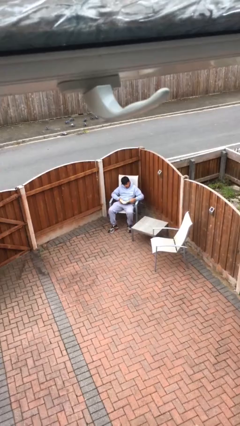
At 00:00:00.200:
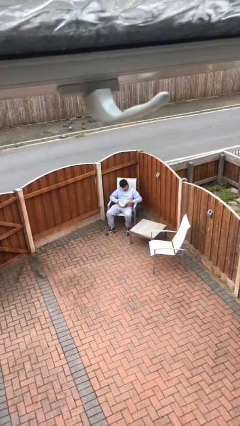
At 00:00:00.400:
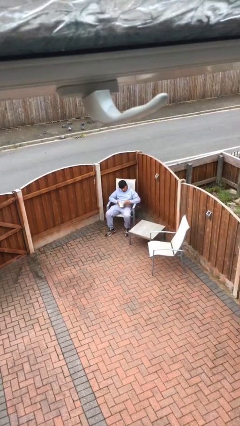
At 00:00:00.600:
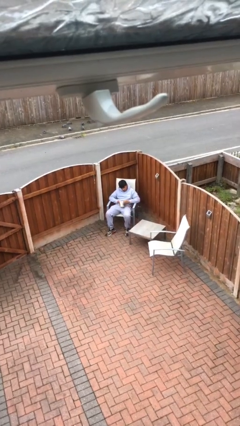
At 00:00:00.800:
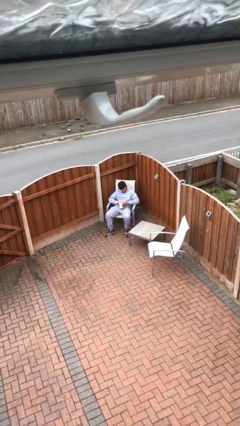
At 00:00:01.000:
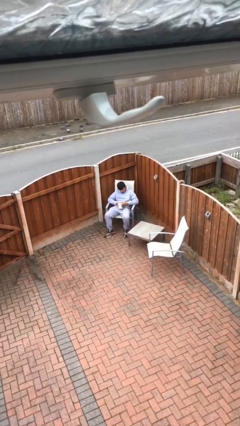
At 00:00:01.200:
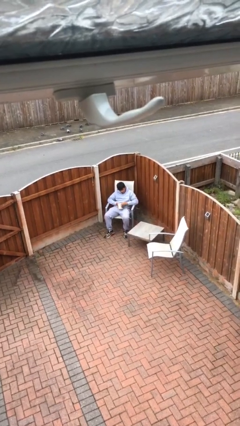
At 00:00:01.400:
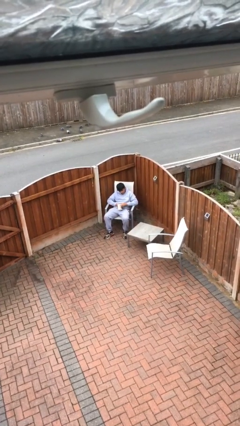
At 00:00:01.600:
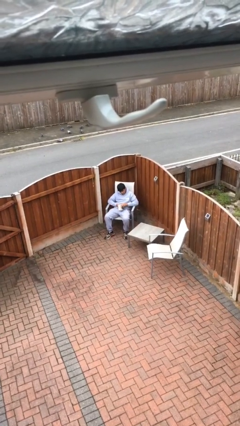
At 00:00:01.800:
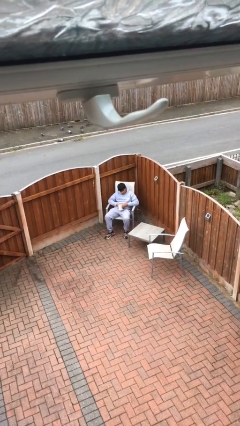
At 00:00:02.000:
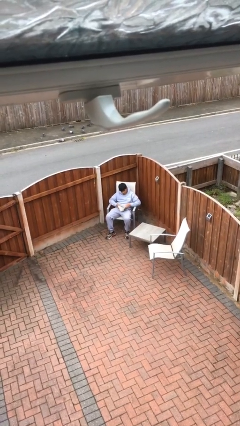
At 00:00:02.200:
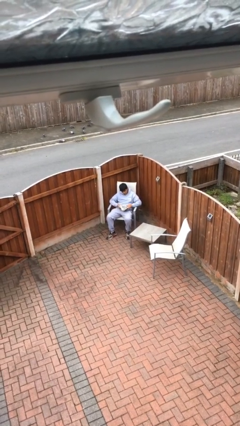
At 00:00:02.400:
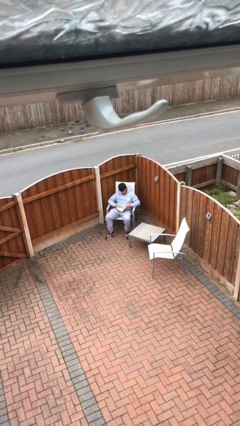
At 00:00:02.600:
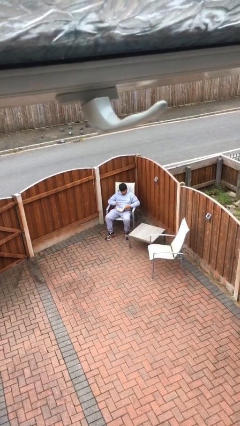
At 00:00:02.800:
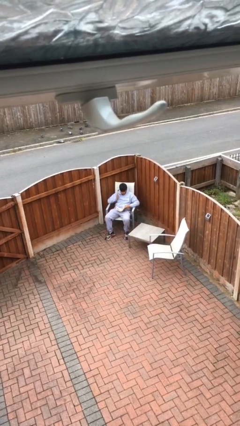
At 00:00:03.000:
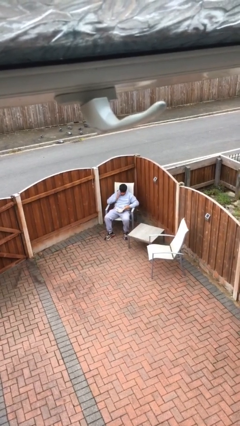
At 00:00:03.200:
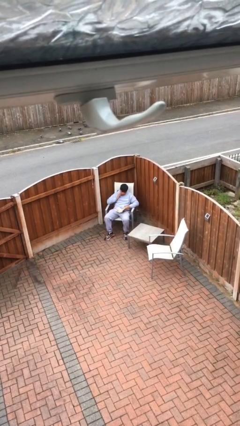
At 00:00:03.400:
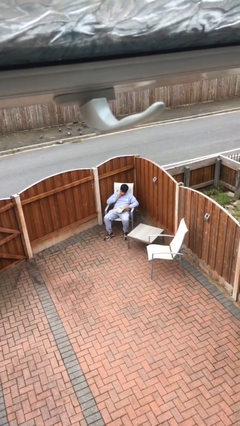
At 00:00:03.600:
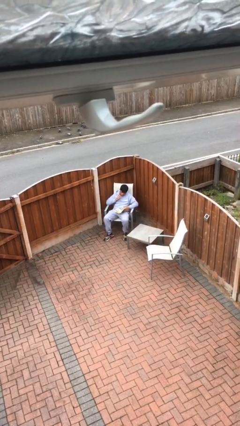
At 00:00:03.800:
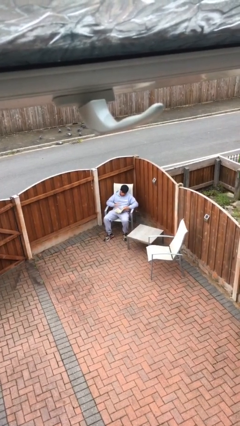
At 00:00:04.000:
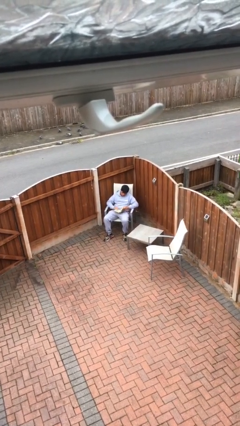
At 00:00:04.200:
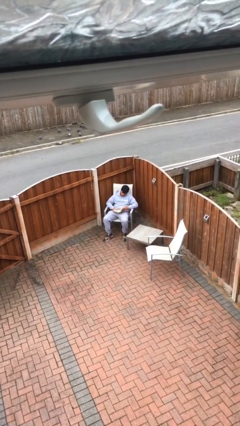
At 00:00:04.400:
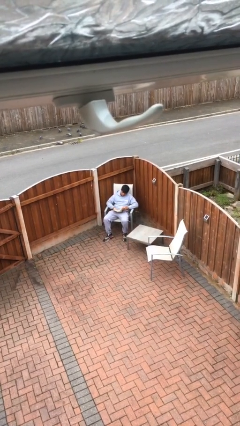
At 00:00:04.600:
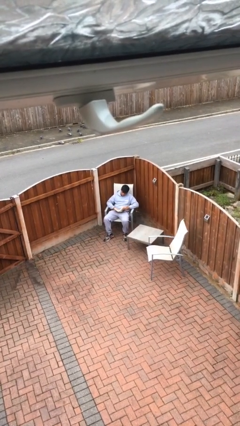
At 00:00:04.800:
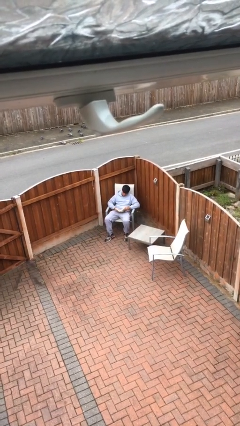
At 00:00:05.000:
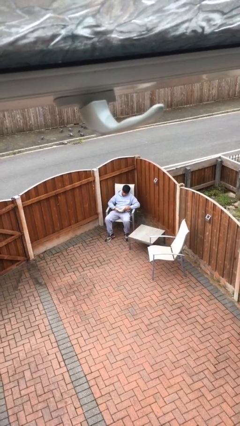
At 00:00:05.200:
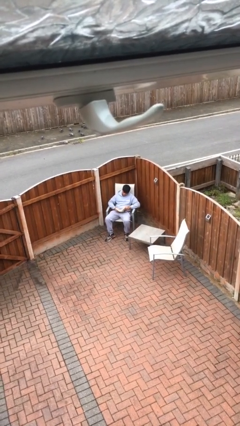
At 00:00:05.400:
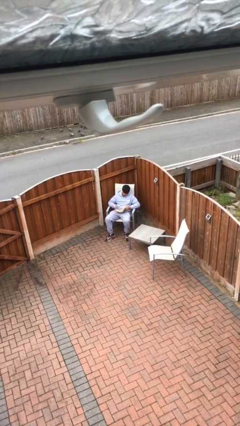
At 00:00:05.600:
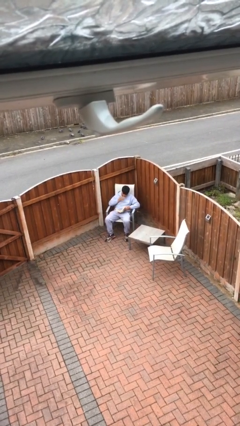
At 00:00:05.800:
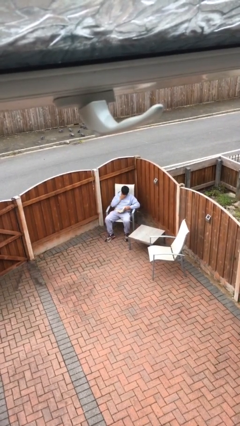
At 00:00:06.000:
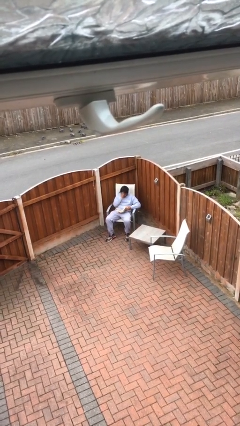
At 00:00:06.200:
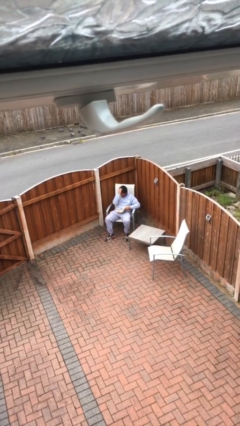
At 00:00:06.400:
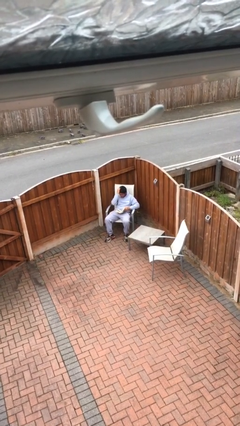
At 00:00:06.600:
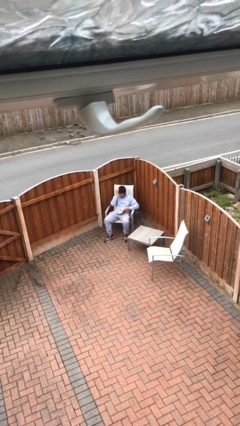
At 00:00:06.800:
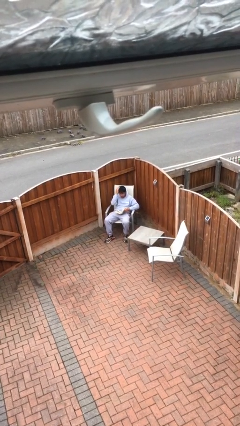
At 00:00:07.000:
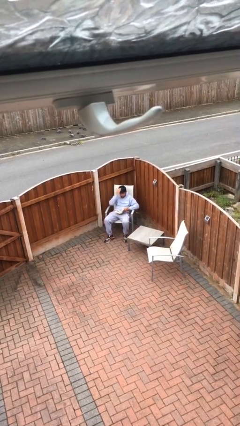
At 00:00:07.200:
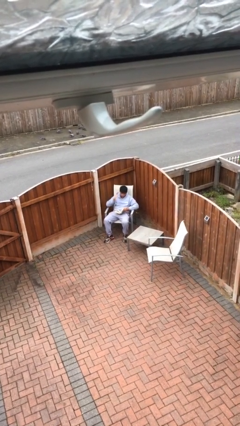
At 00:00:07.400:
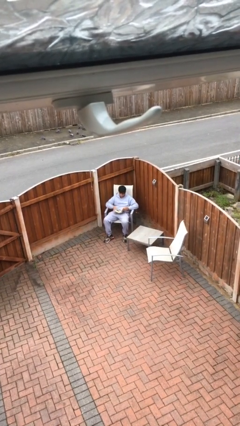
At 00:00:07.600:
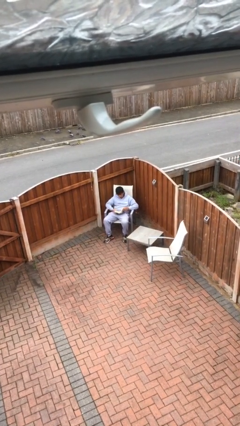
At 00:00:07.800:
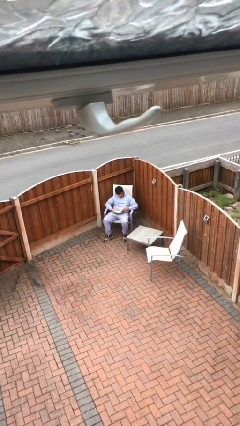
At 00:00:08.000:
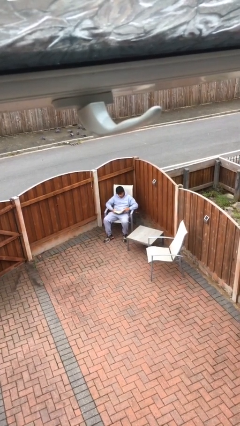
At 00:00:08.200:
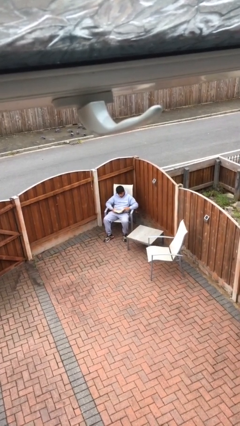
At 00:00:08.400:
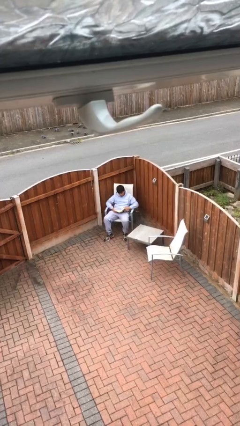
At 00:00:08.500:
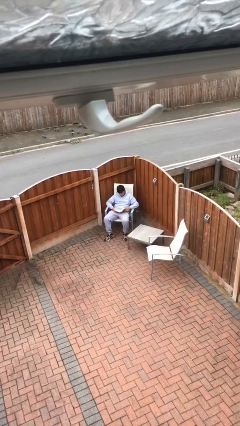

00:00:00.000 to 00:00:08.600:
person reads document

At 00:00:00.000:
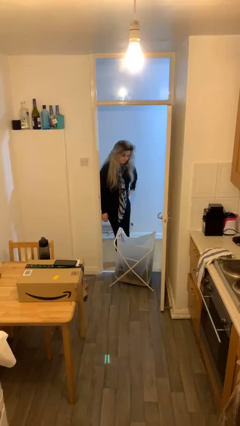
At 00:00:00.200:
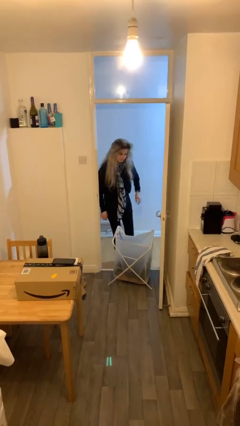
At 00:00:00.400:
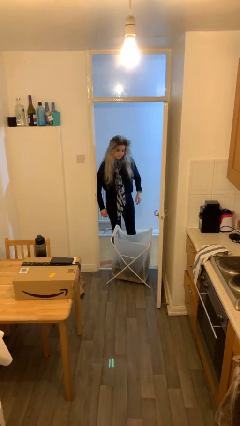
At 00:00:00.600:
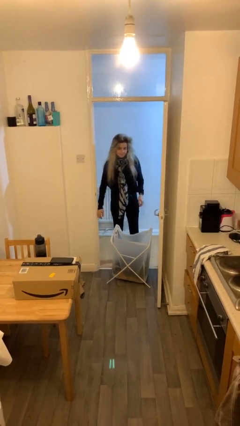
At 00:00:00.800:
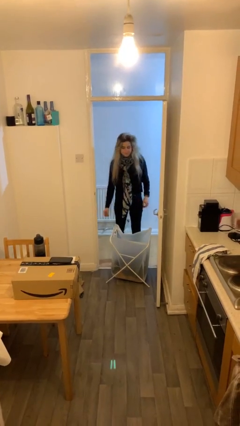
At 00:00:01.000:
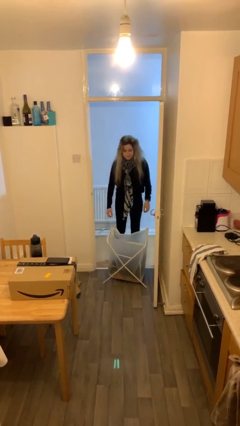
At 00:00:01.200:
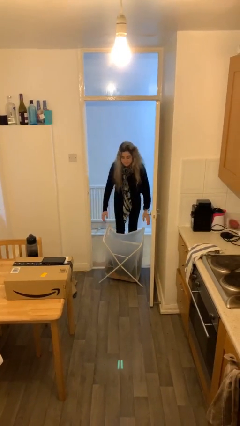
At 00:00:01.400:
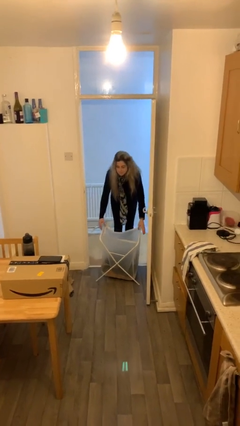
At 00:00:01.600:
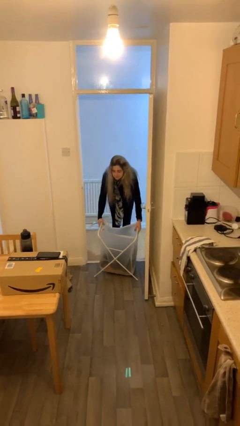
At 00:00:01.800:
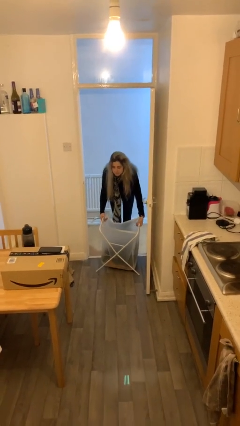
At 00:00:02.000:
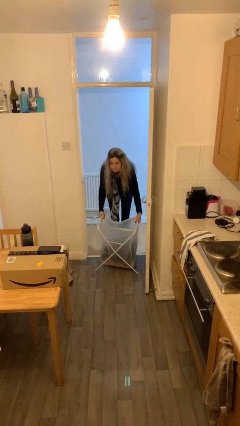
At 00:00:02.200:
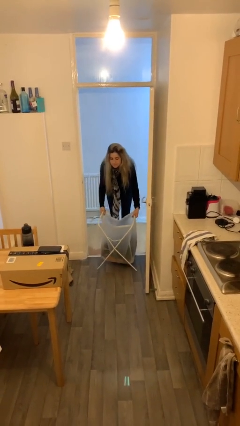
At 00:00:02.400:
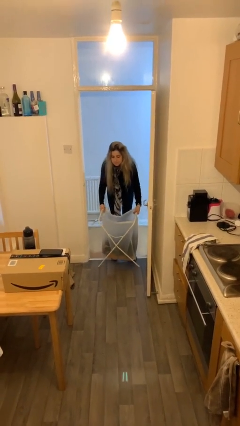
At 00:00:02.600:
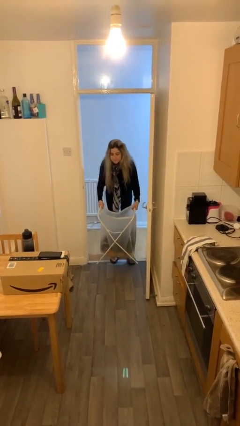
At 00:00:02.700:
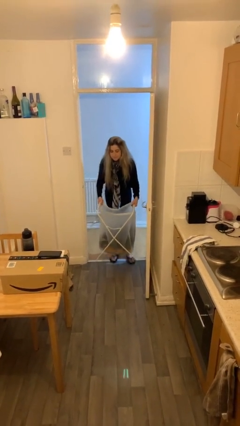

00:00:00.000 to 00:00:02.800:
person picks up object from floor

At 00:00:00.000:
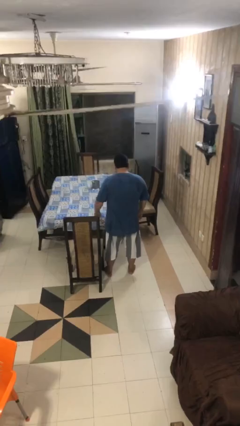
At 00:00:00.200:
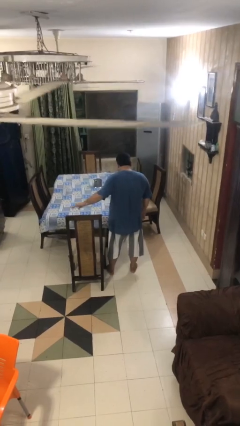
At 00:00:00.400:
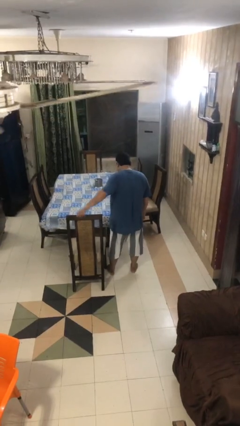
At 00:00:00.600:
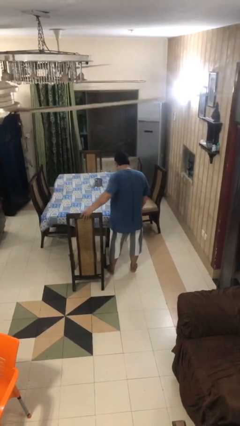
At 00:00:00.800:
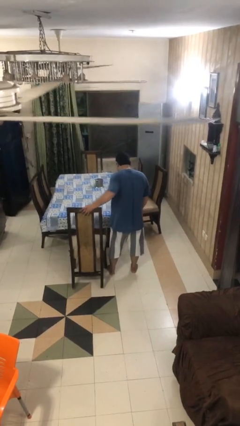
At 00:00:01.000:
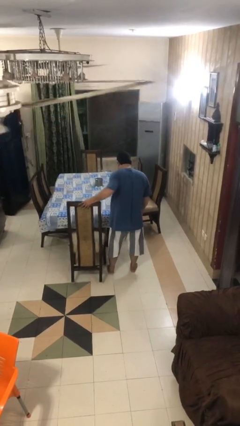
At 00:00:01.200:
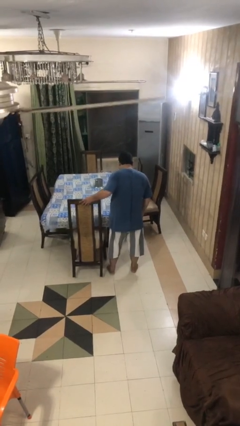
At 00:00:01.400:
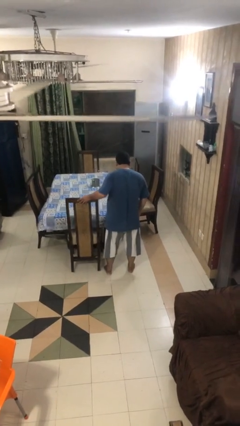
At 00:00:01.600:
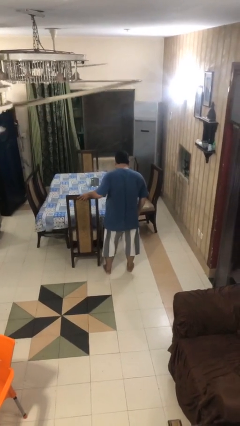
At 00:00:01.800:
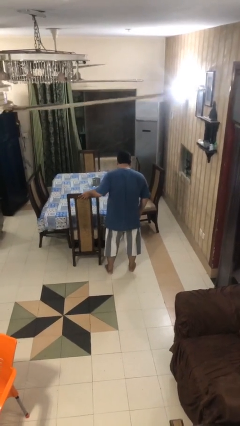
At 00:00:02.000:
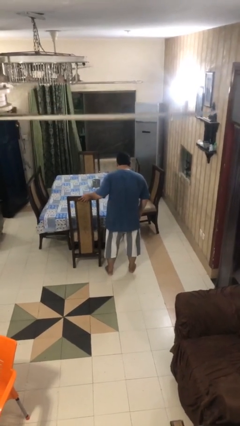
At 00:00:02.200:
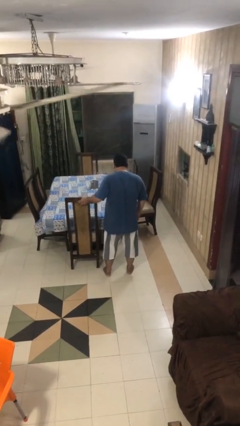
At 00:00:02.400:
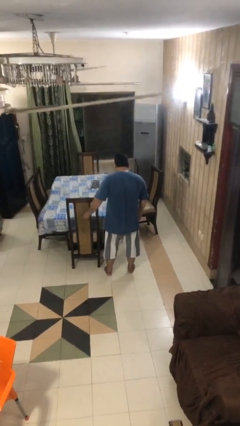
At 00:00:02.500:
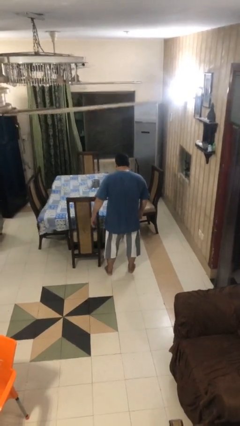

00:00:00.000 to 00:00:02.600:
person pushes in chair

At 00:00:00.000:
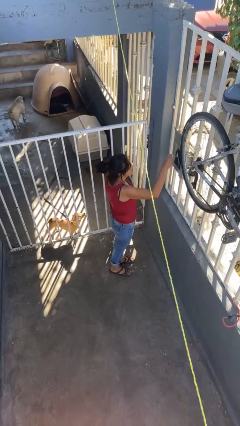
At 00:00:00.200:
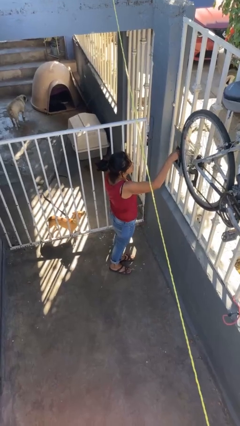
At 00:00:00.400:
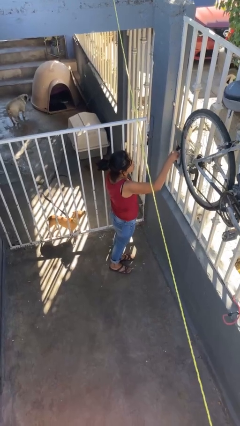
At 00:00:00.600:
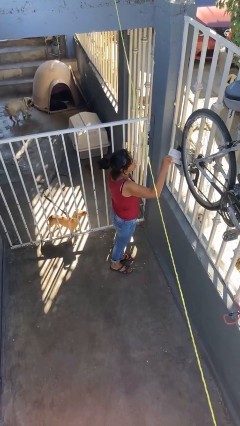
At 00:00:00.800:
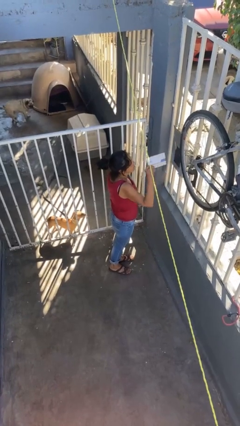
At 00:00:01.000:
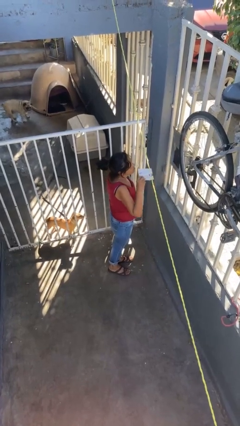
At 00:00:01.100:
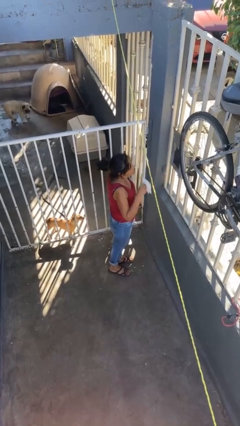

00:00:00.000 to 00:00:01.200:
person takes letters from mailbox

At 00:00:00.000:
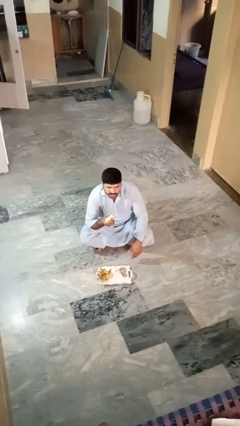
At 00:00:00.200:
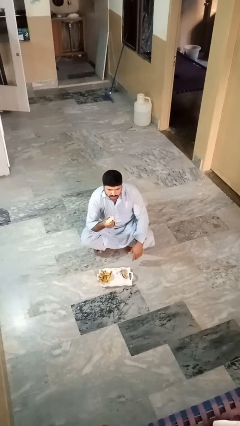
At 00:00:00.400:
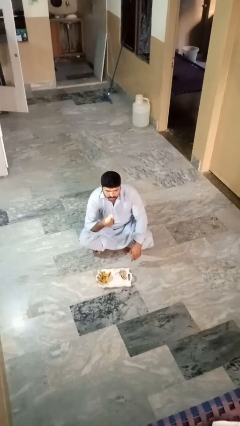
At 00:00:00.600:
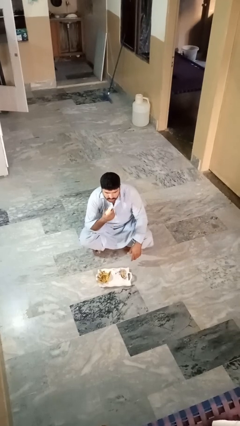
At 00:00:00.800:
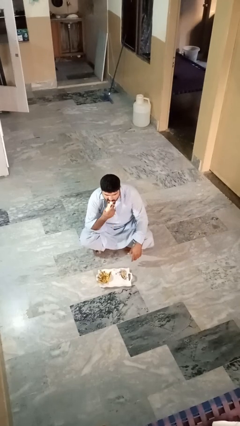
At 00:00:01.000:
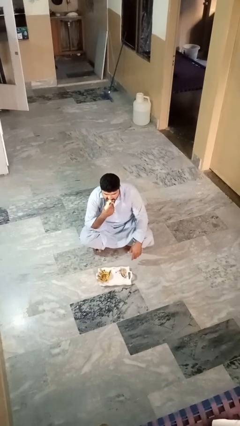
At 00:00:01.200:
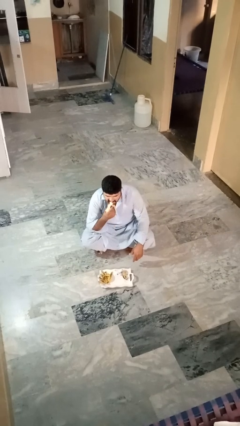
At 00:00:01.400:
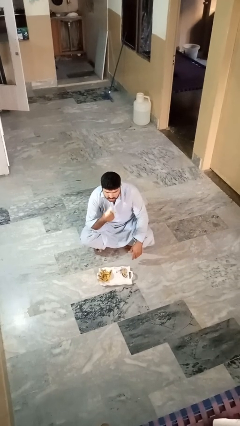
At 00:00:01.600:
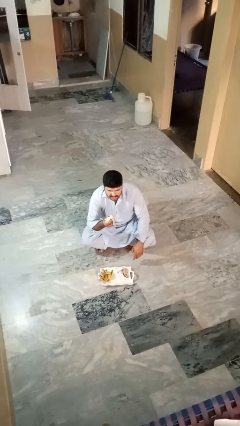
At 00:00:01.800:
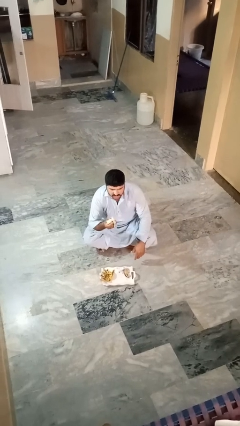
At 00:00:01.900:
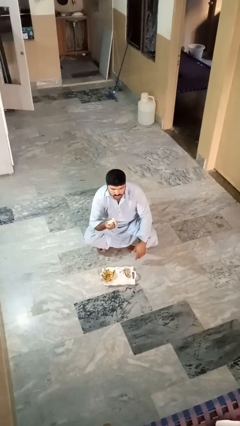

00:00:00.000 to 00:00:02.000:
person eats banana

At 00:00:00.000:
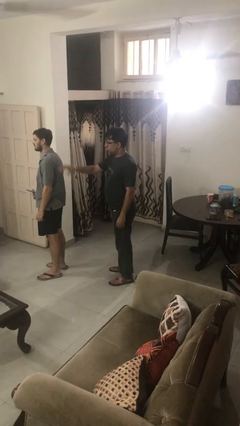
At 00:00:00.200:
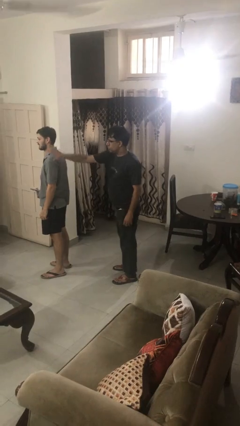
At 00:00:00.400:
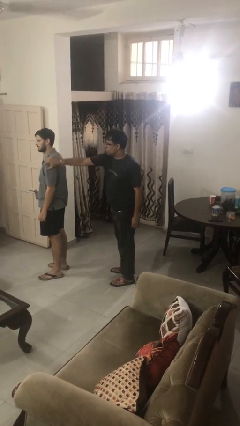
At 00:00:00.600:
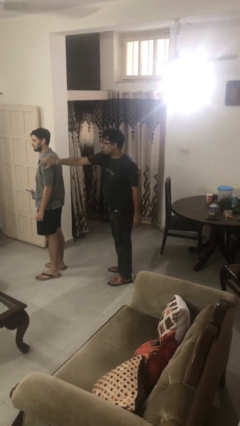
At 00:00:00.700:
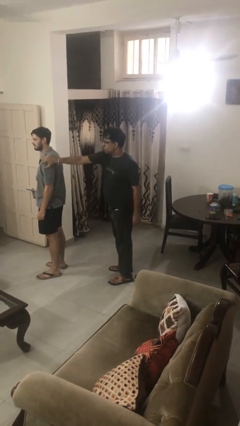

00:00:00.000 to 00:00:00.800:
person grabs person by shoulder
